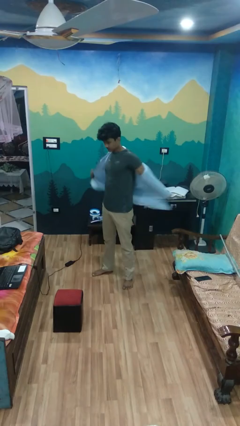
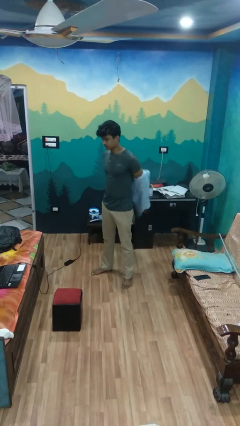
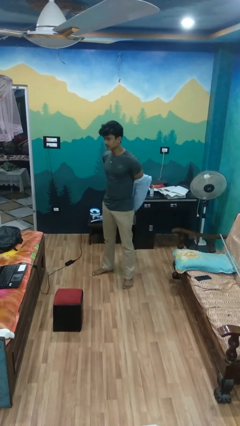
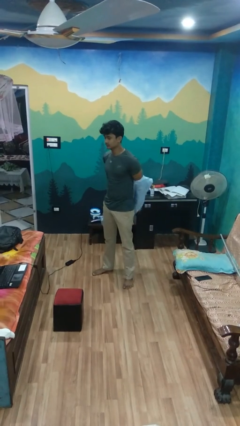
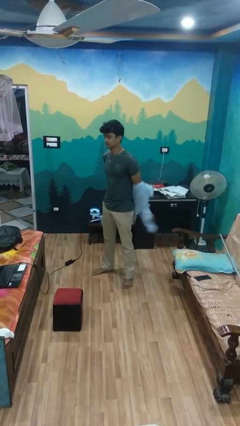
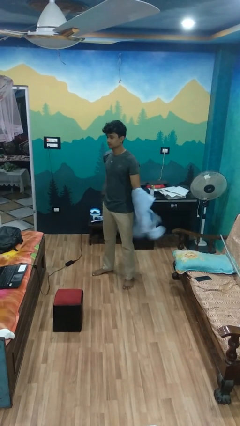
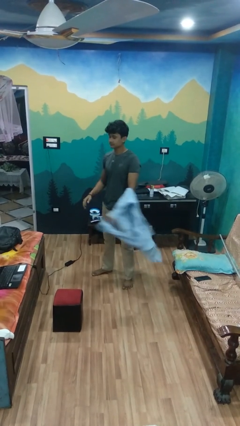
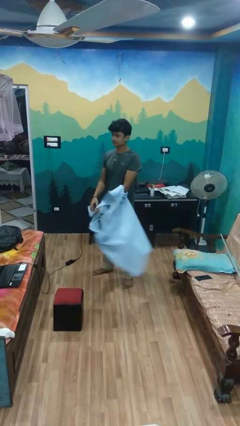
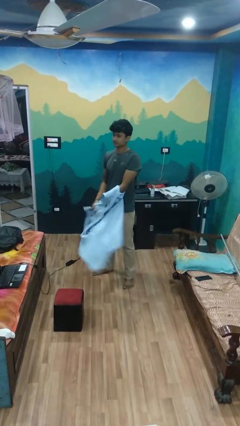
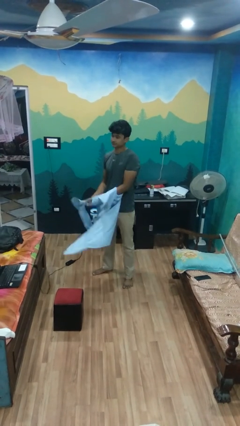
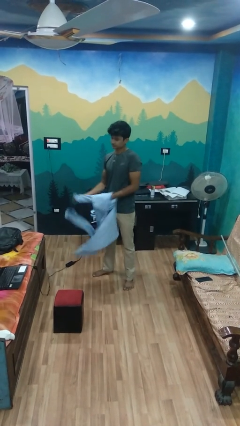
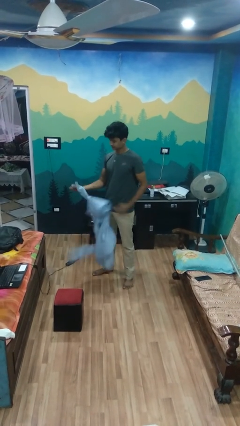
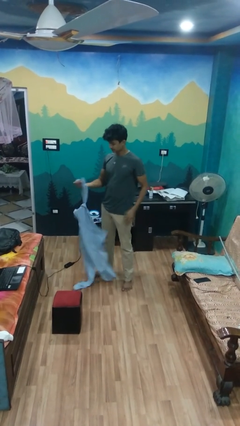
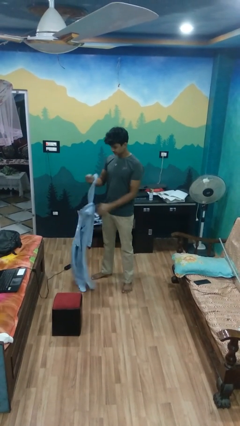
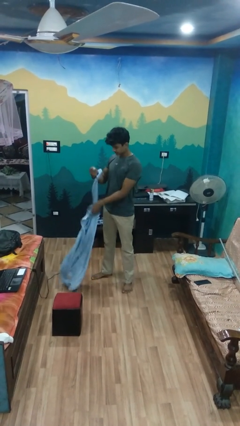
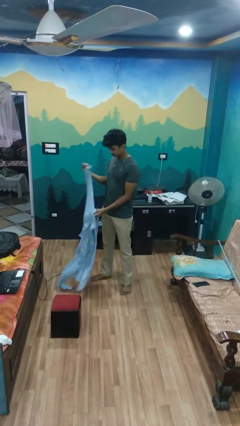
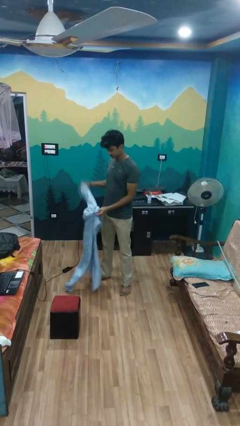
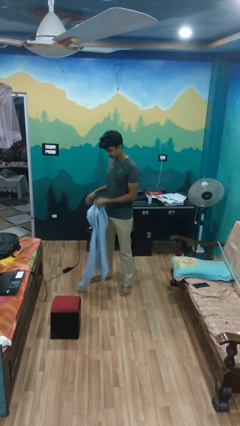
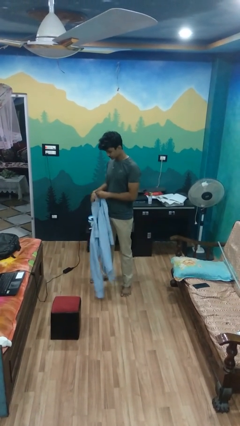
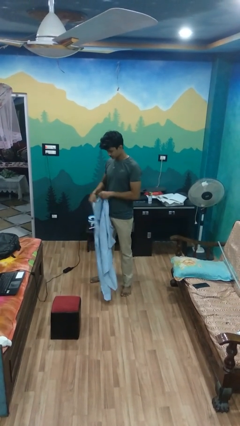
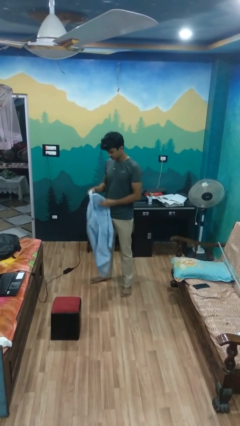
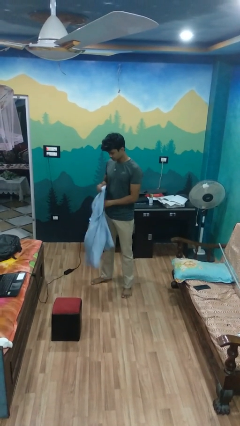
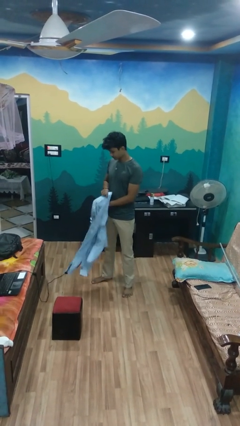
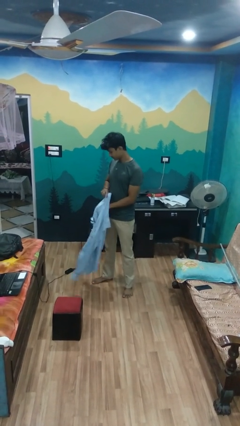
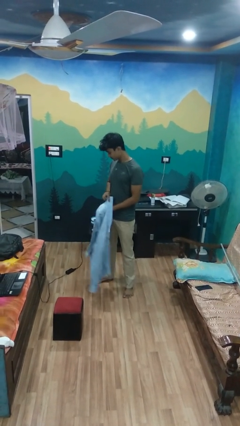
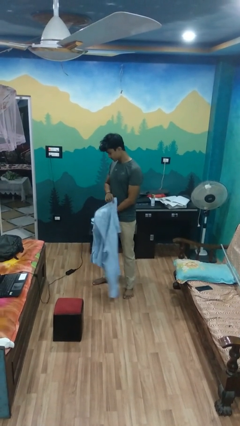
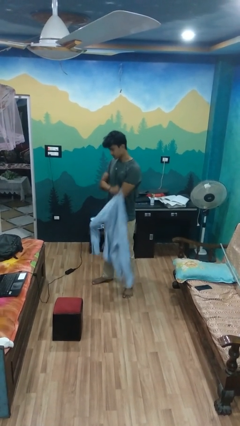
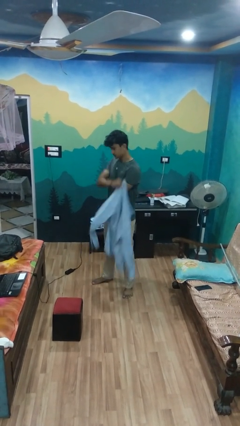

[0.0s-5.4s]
person takes off shirt

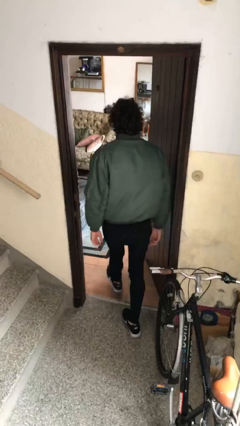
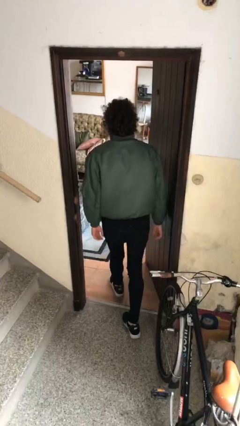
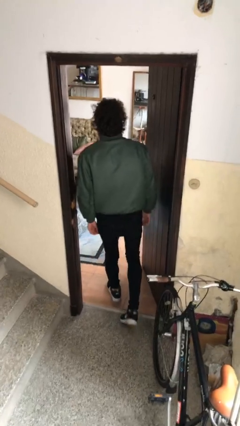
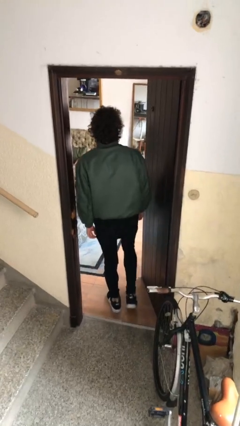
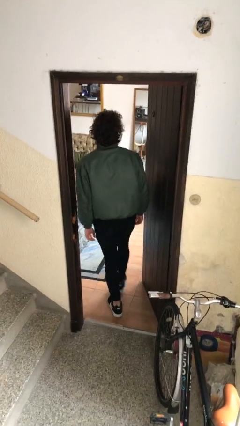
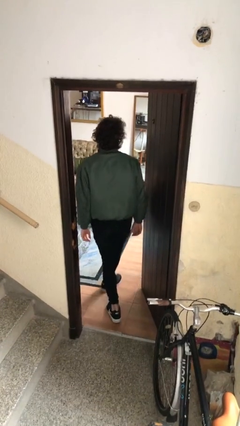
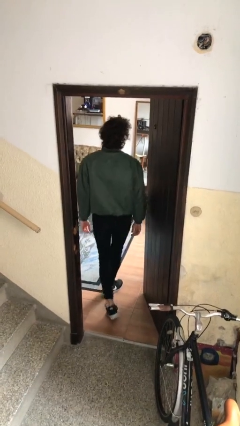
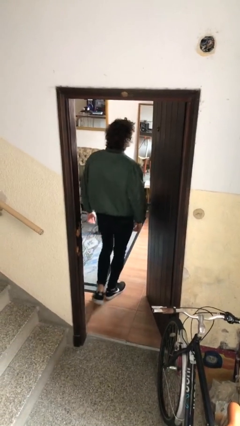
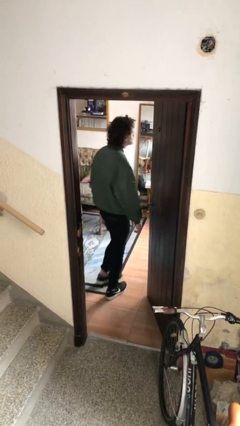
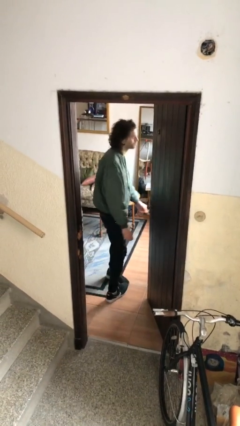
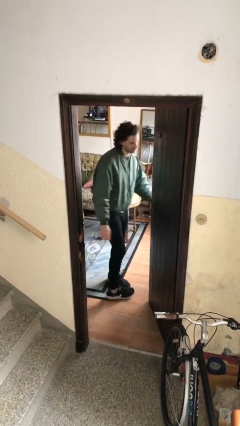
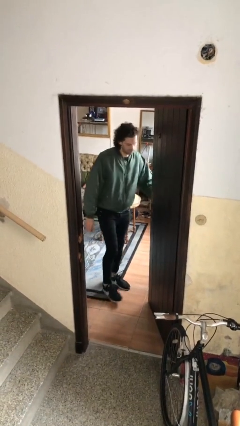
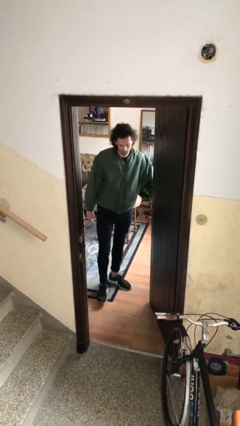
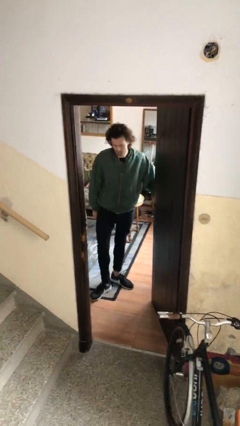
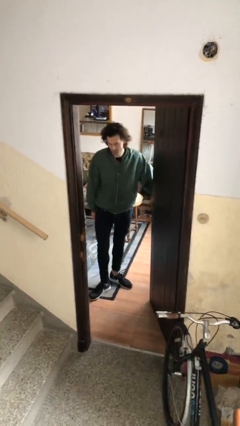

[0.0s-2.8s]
person exits scene through structure

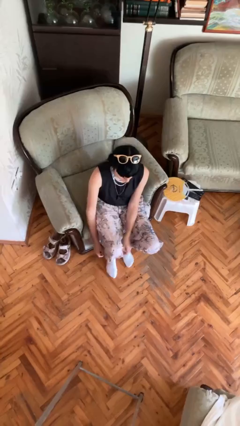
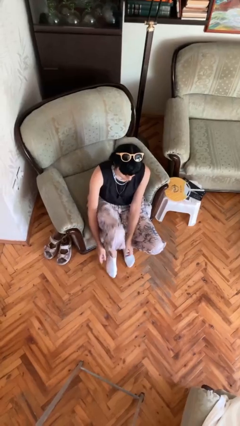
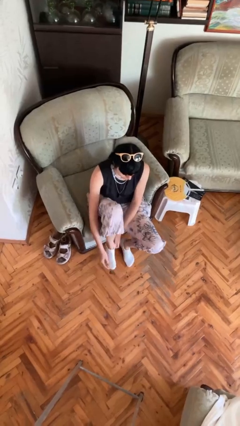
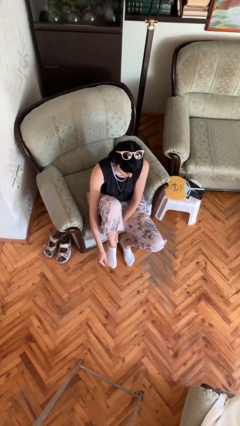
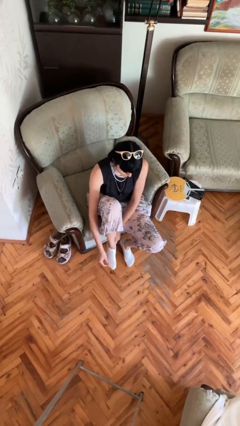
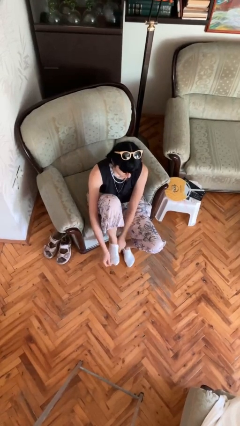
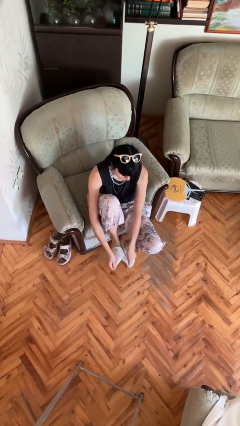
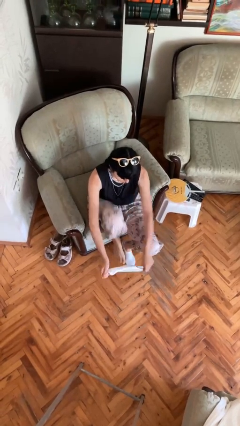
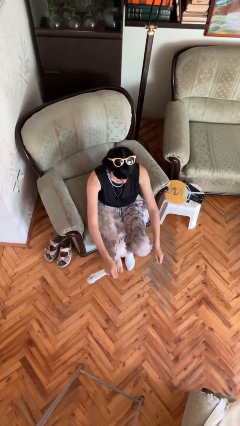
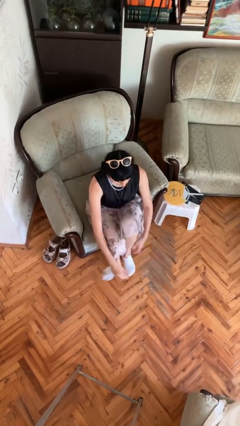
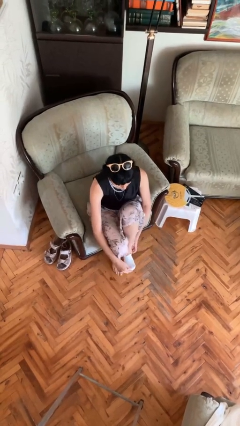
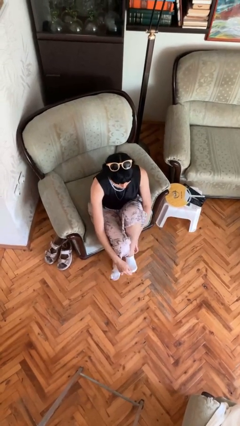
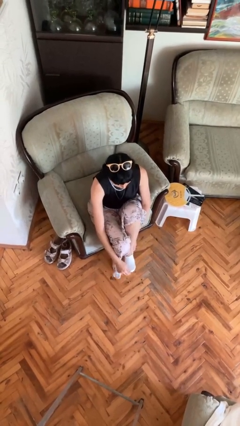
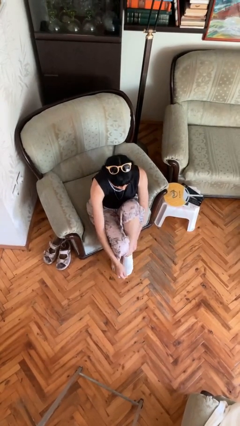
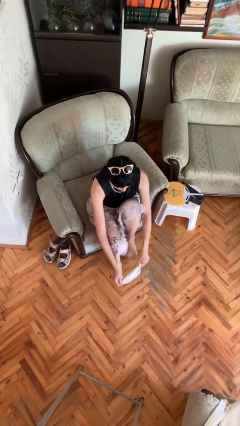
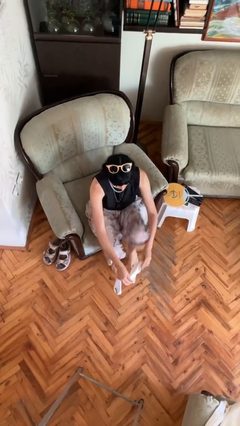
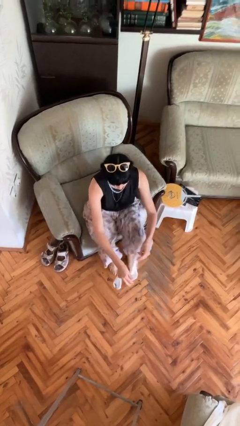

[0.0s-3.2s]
person takes off socks

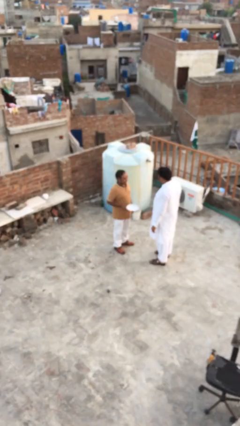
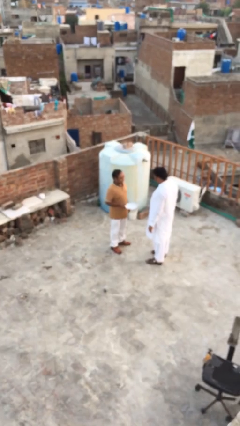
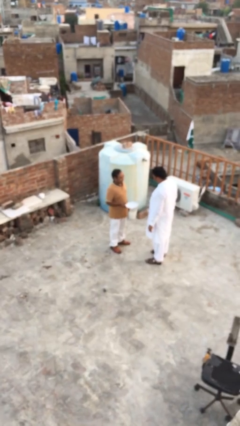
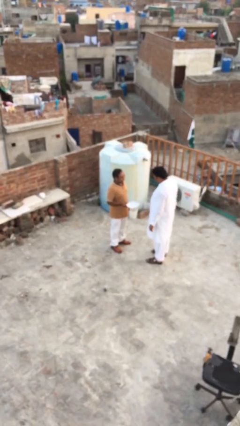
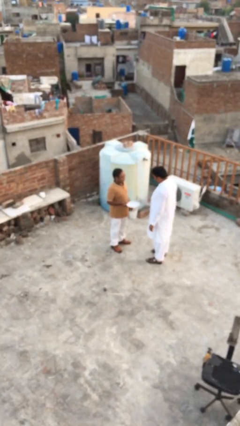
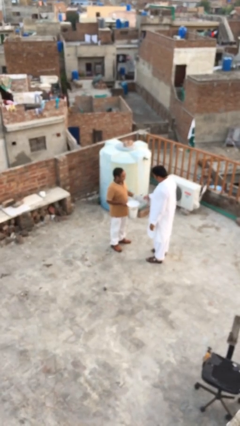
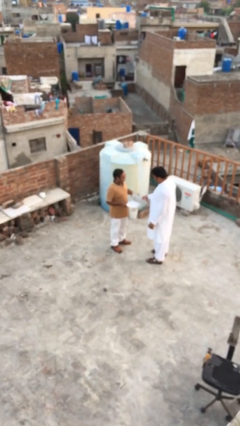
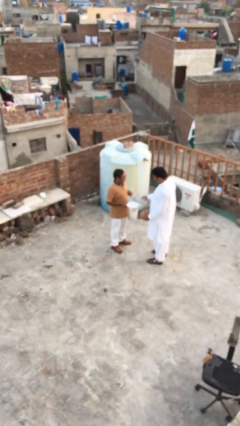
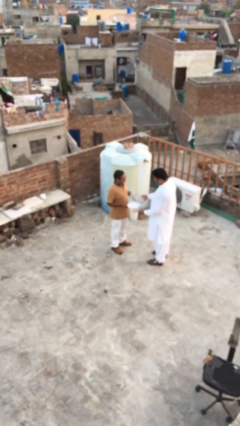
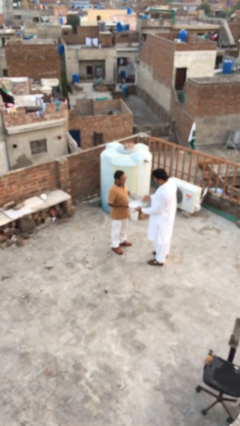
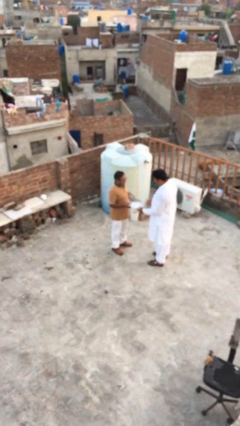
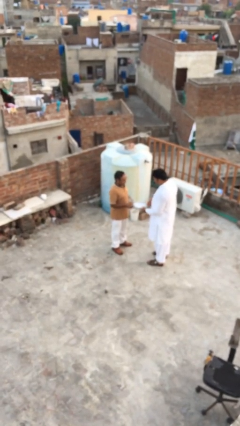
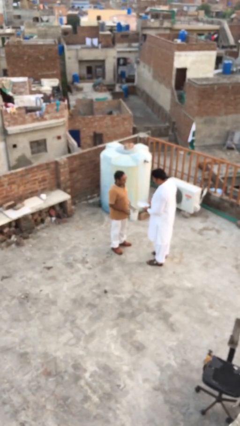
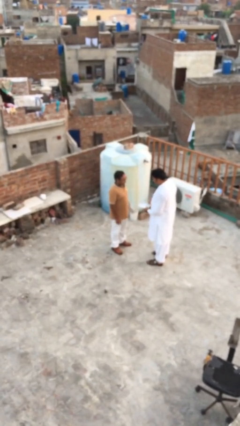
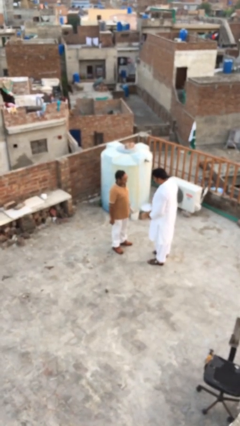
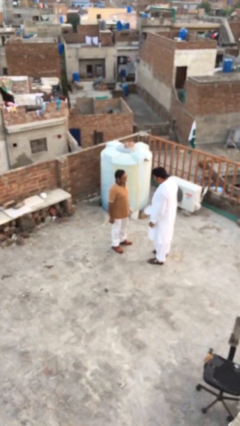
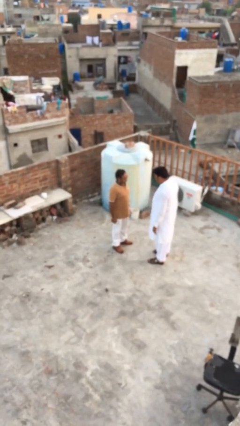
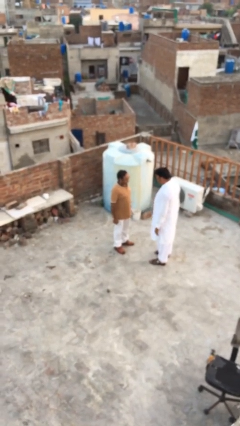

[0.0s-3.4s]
person transfers object to person

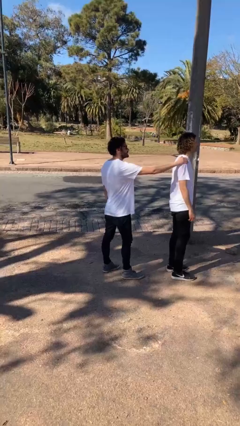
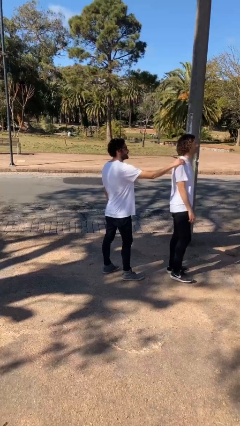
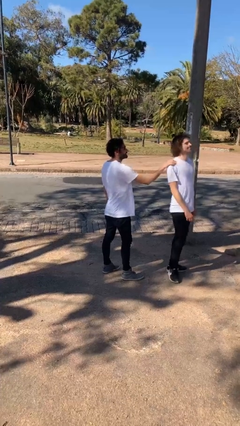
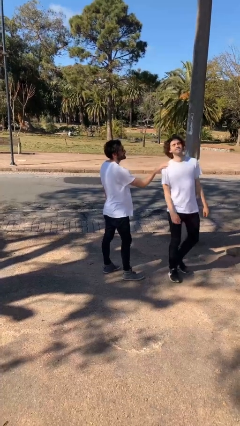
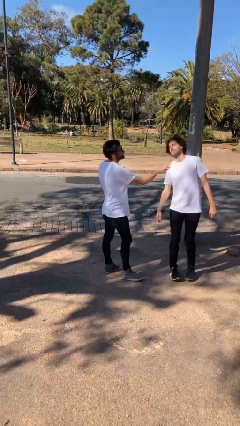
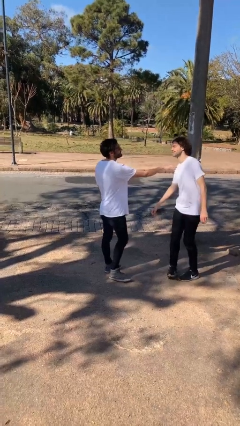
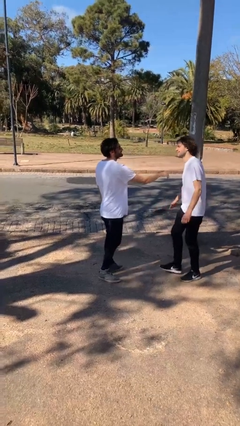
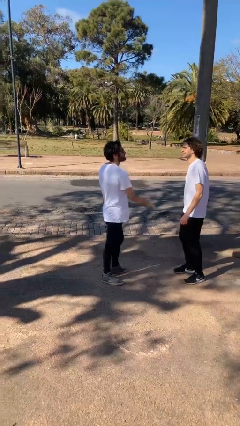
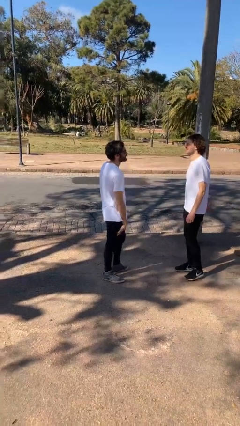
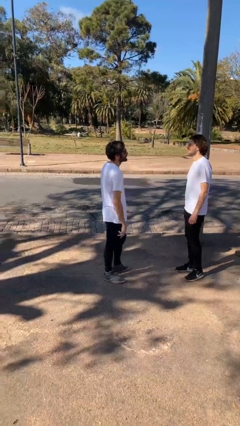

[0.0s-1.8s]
person spins person around

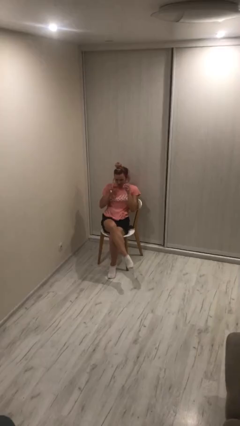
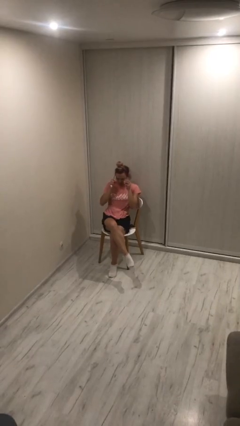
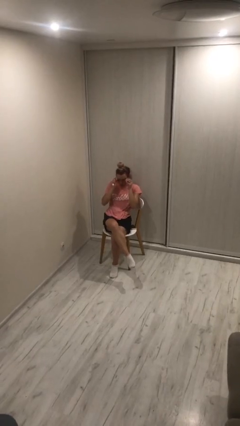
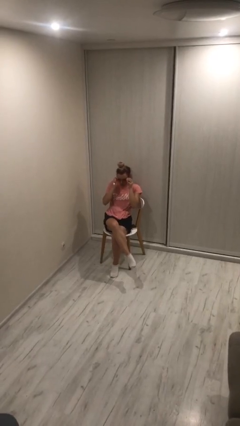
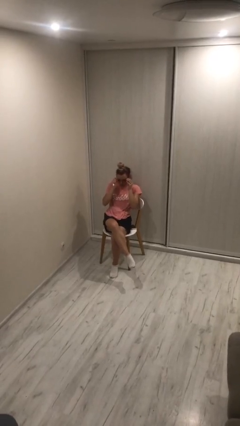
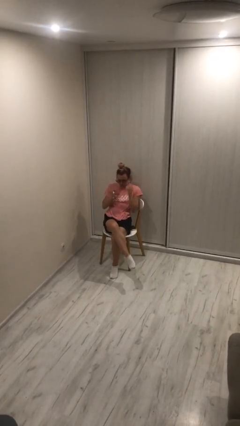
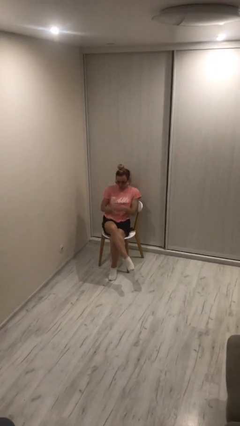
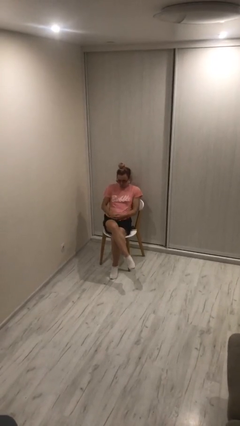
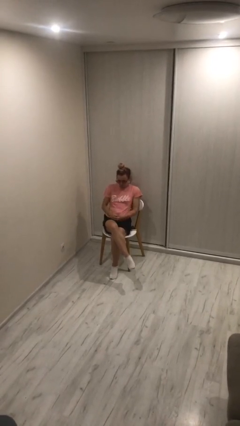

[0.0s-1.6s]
person puts on glasses
